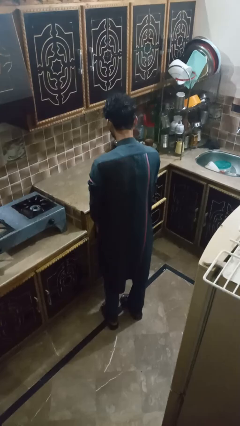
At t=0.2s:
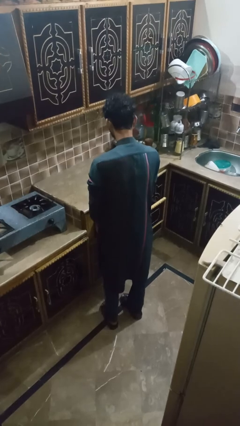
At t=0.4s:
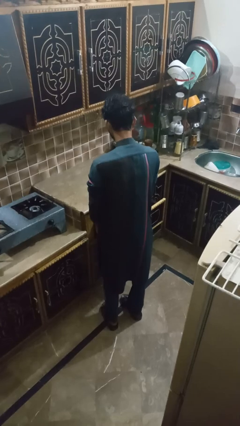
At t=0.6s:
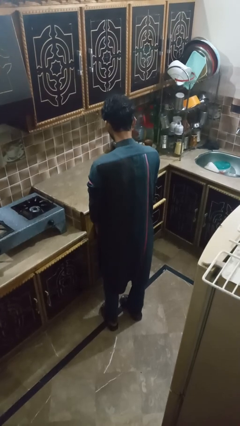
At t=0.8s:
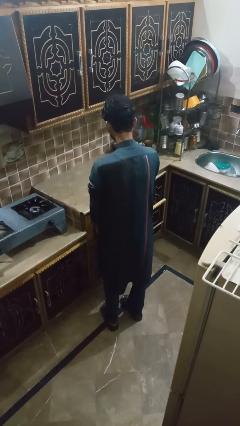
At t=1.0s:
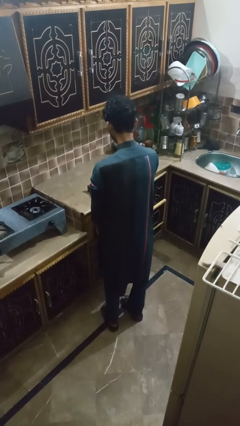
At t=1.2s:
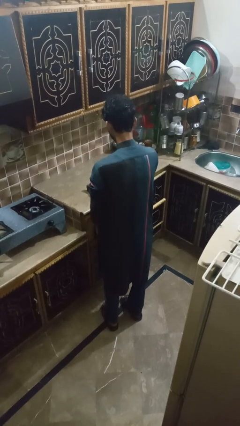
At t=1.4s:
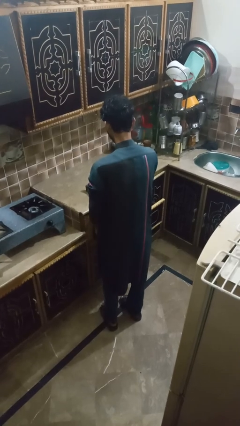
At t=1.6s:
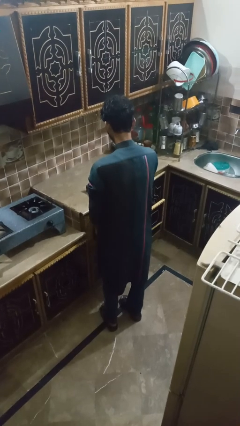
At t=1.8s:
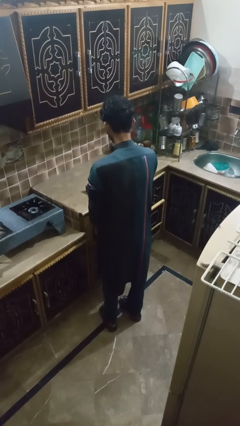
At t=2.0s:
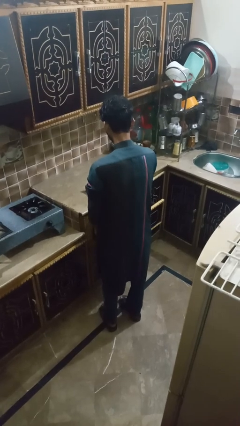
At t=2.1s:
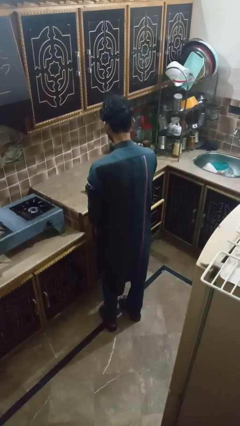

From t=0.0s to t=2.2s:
person takes object from kitchen drawer

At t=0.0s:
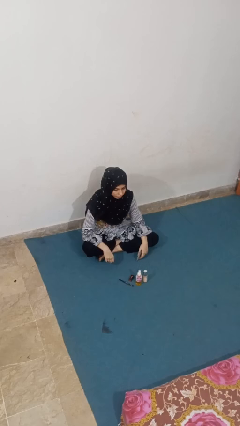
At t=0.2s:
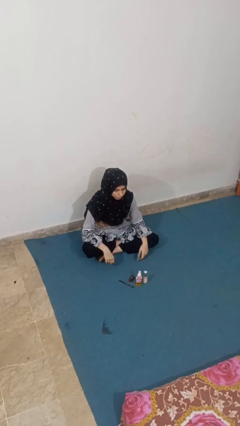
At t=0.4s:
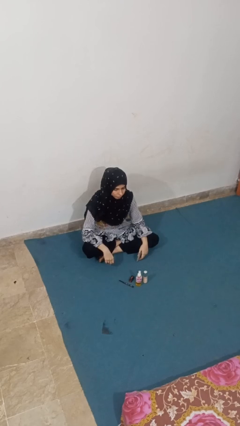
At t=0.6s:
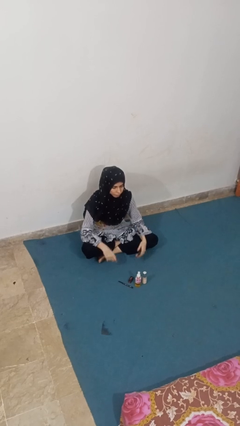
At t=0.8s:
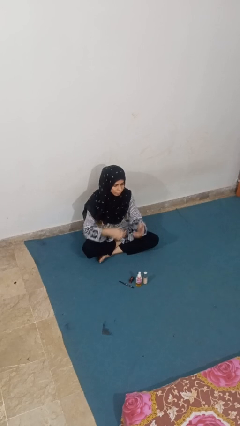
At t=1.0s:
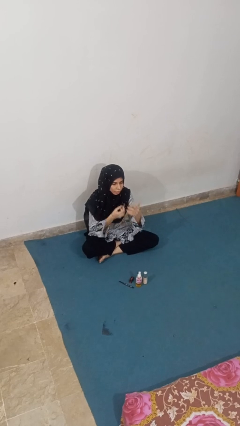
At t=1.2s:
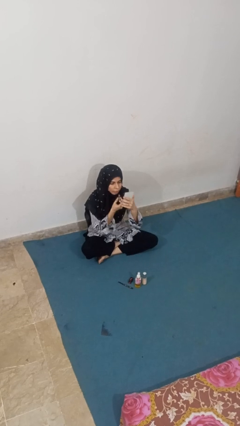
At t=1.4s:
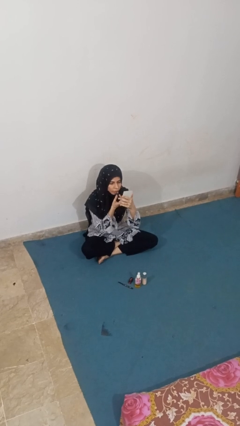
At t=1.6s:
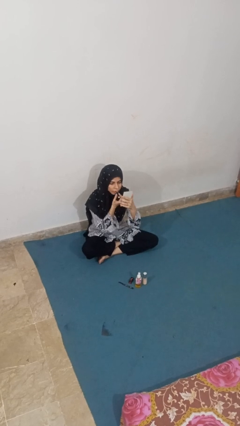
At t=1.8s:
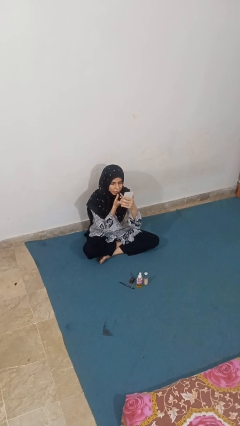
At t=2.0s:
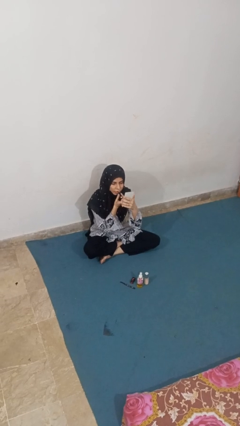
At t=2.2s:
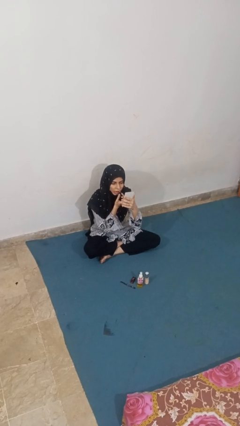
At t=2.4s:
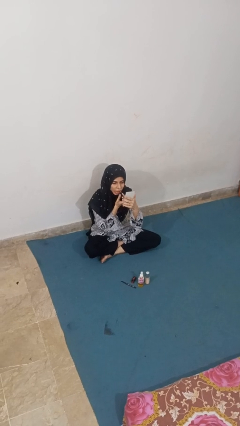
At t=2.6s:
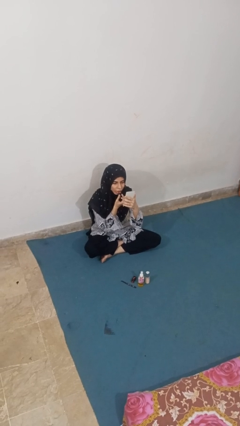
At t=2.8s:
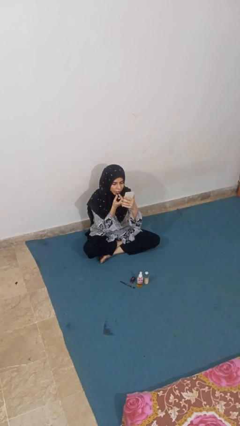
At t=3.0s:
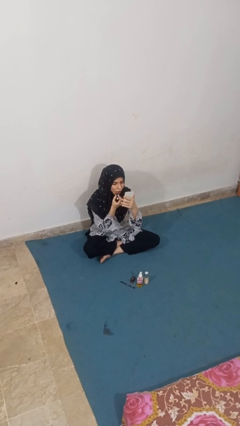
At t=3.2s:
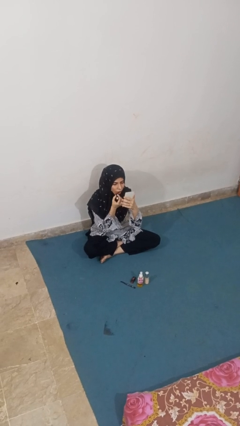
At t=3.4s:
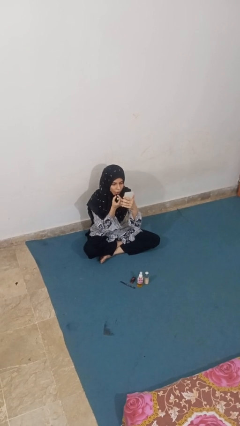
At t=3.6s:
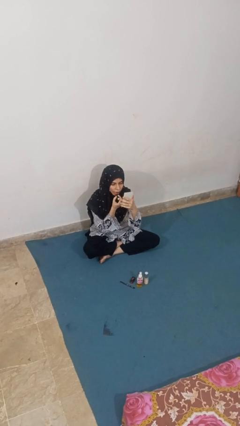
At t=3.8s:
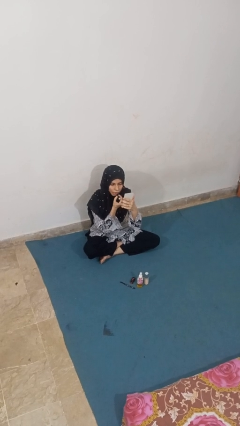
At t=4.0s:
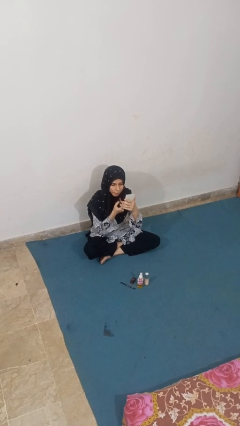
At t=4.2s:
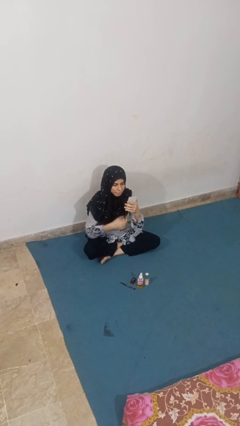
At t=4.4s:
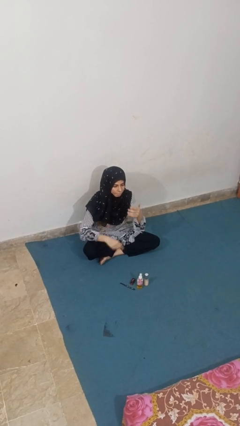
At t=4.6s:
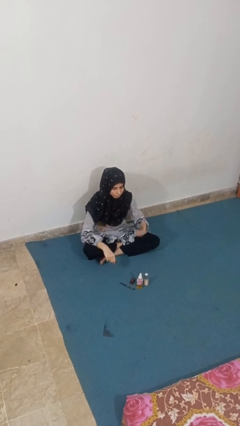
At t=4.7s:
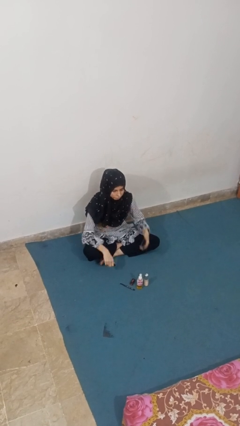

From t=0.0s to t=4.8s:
person applies lip makeup

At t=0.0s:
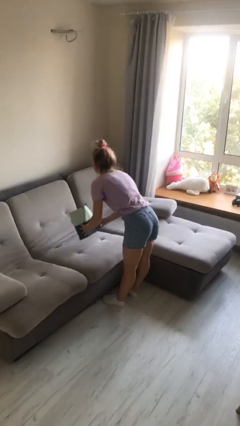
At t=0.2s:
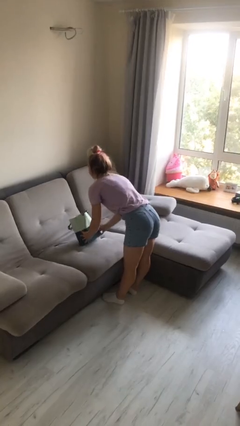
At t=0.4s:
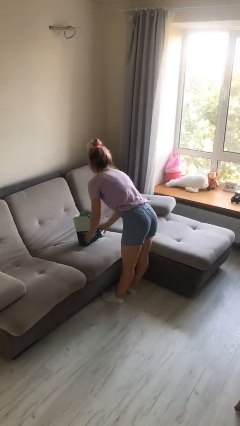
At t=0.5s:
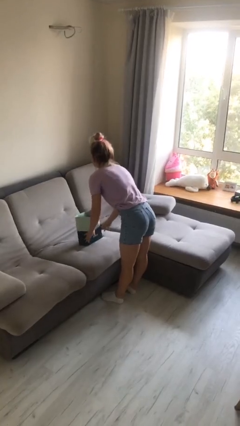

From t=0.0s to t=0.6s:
person puts down object on couch

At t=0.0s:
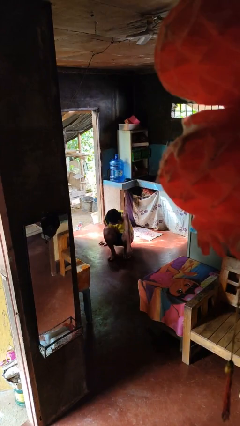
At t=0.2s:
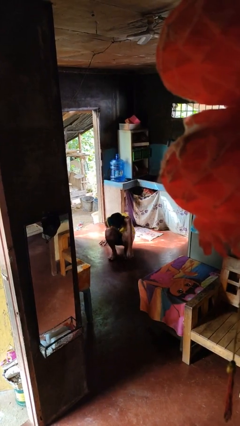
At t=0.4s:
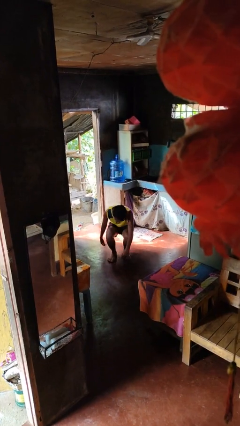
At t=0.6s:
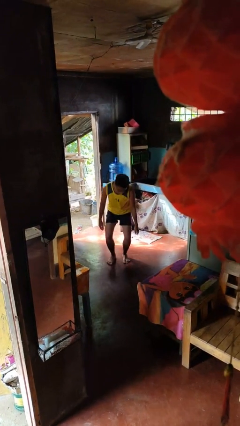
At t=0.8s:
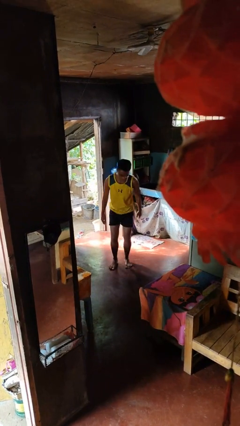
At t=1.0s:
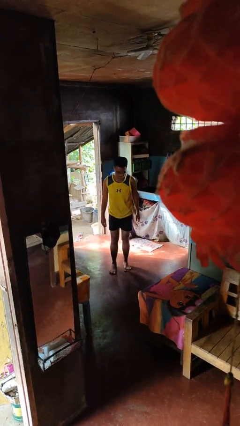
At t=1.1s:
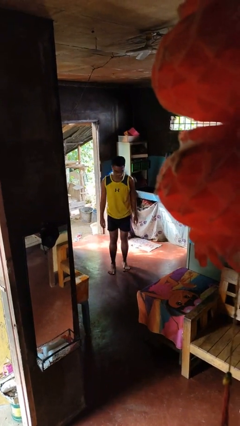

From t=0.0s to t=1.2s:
person stands up from floor

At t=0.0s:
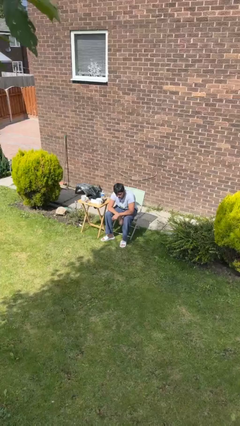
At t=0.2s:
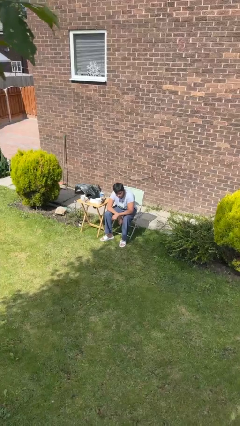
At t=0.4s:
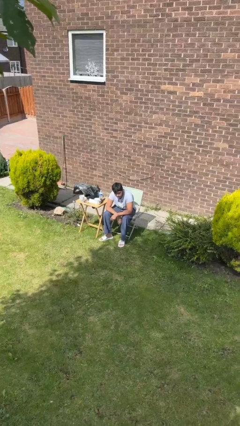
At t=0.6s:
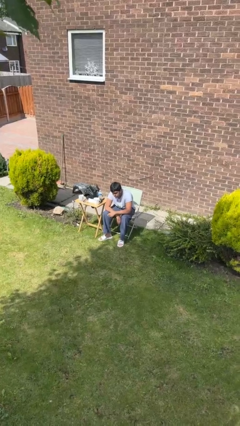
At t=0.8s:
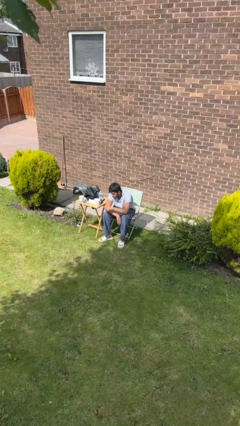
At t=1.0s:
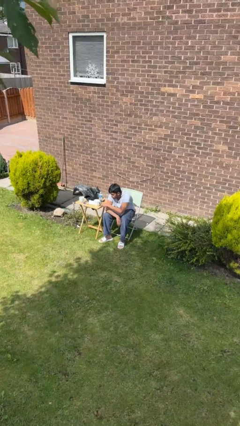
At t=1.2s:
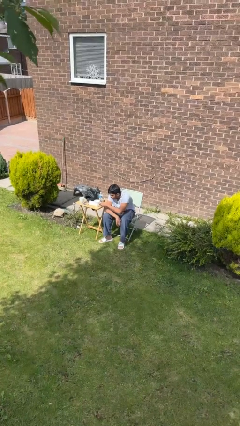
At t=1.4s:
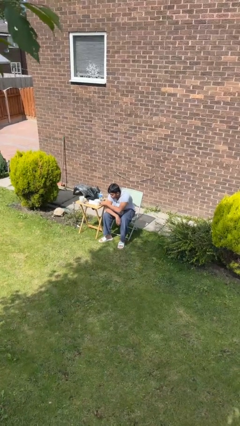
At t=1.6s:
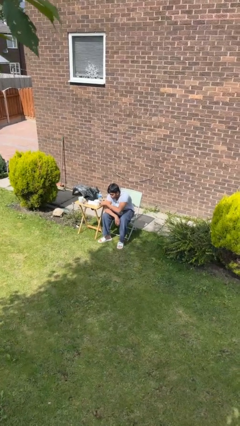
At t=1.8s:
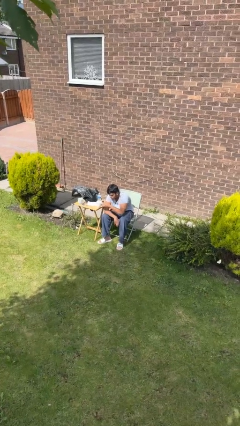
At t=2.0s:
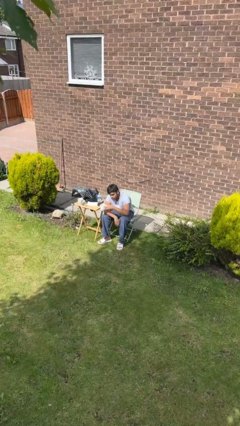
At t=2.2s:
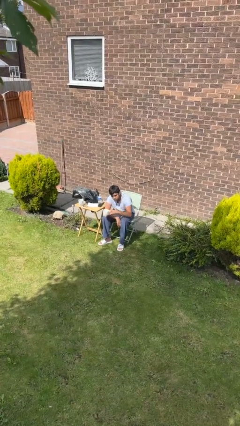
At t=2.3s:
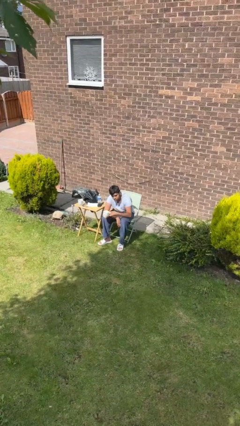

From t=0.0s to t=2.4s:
person picks up object from table

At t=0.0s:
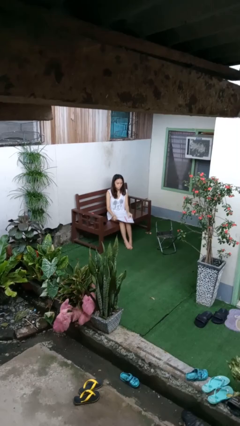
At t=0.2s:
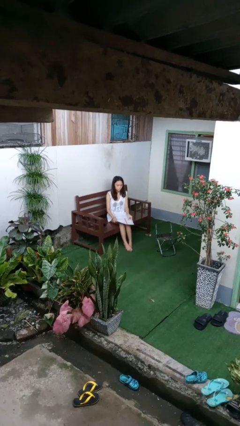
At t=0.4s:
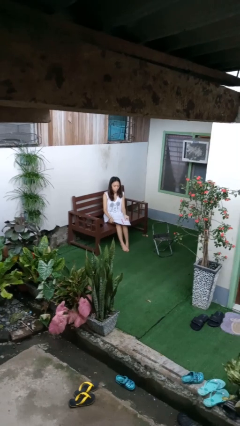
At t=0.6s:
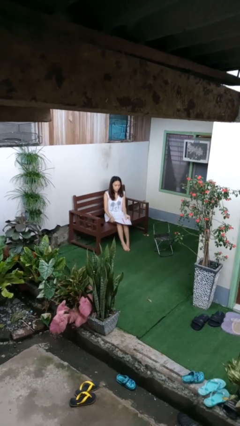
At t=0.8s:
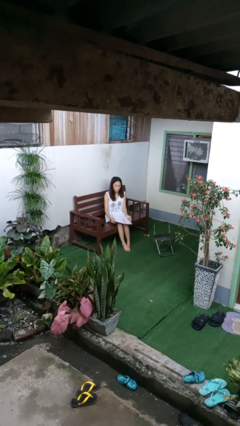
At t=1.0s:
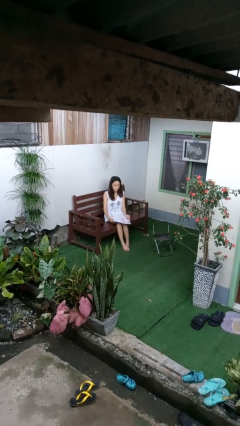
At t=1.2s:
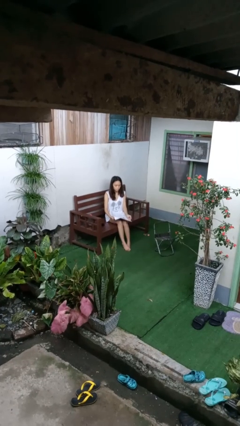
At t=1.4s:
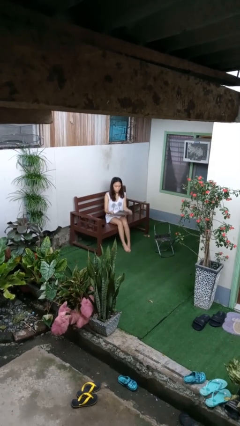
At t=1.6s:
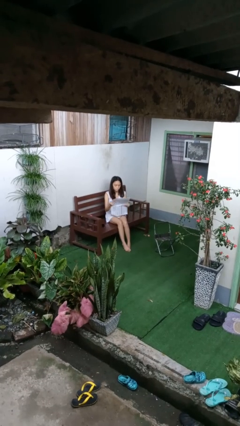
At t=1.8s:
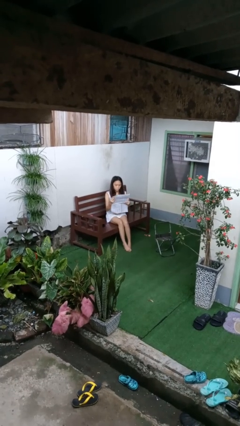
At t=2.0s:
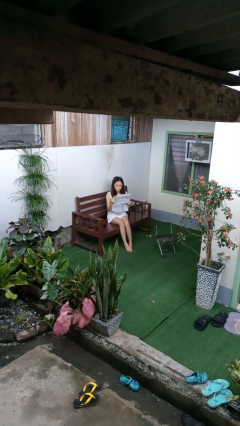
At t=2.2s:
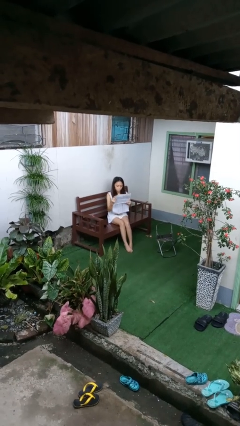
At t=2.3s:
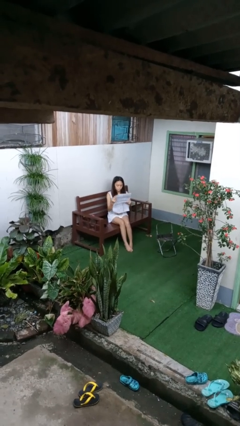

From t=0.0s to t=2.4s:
person reads newspaper

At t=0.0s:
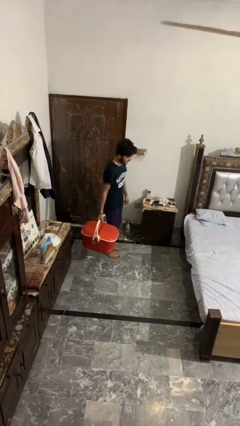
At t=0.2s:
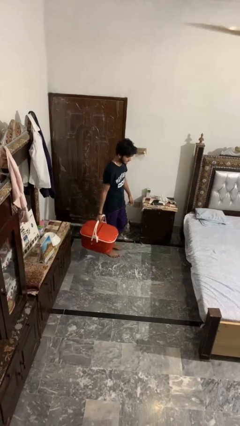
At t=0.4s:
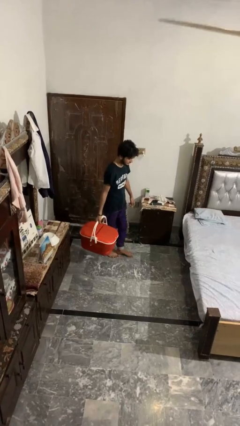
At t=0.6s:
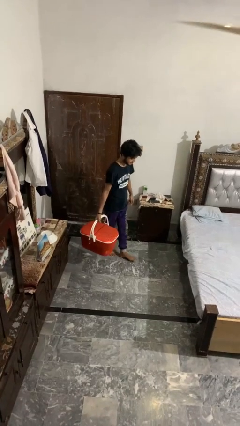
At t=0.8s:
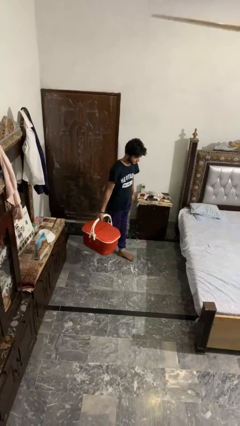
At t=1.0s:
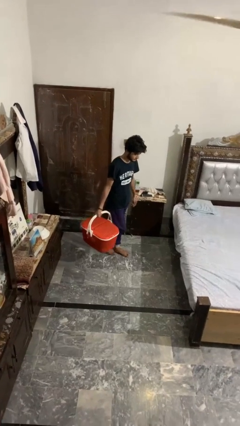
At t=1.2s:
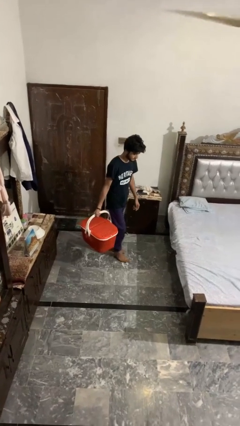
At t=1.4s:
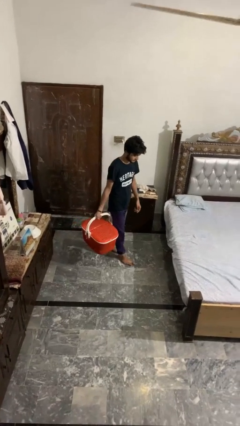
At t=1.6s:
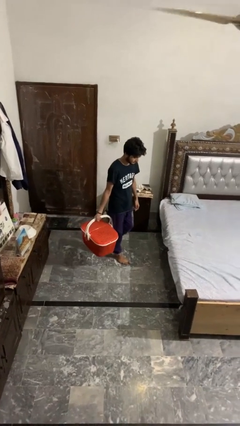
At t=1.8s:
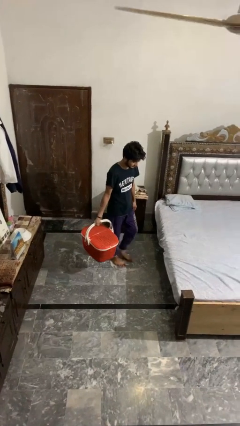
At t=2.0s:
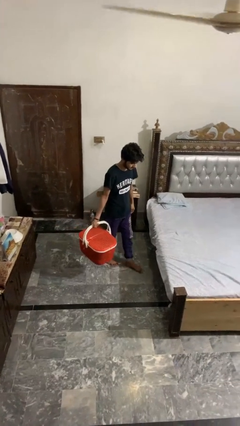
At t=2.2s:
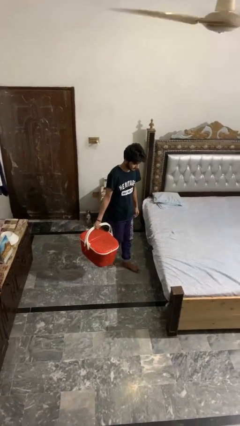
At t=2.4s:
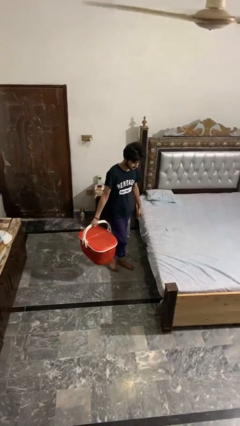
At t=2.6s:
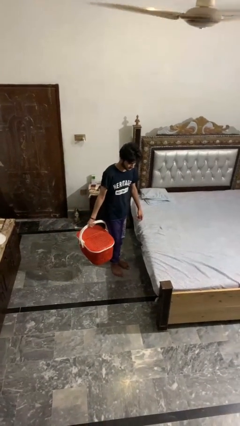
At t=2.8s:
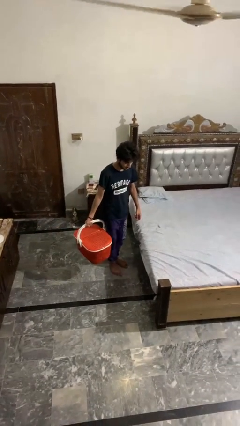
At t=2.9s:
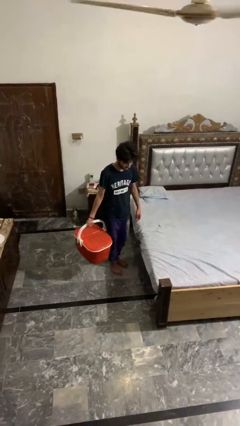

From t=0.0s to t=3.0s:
person carries laundry basket

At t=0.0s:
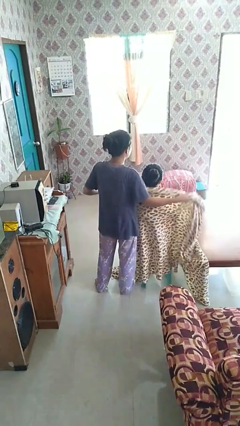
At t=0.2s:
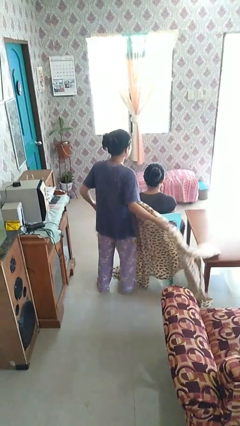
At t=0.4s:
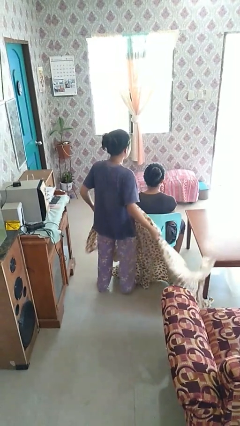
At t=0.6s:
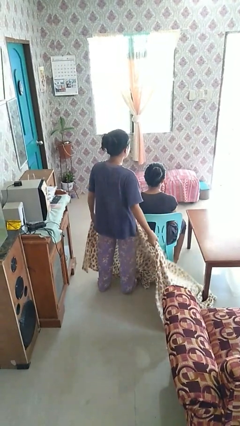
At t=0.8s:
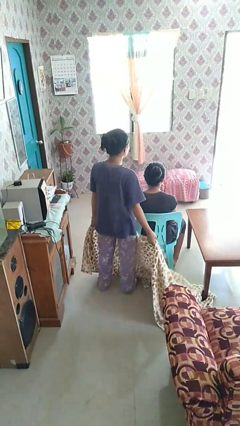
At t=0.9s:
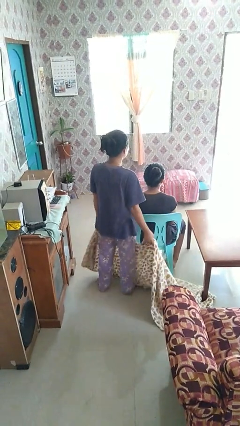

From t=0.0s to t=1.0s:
person uncovers friend with blanket
